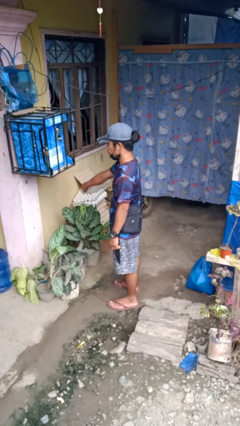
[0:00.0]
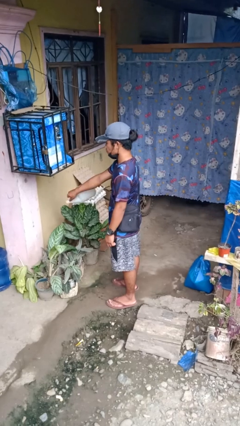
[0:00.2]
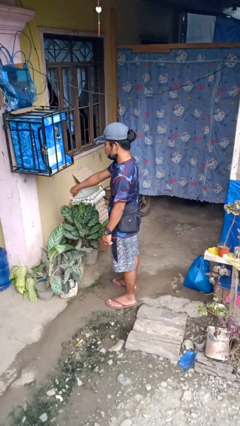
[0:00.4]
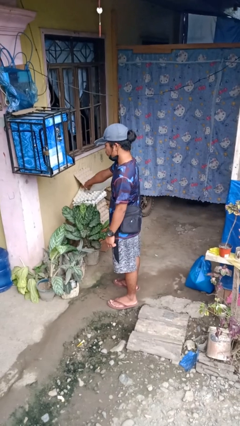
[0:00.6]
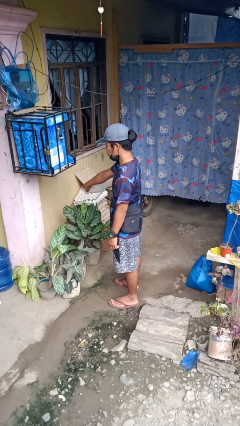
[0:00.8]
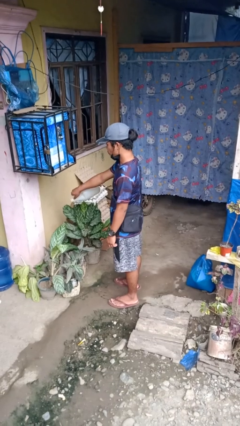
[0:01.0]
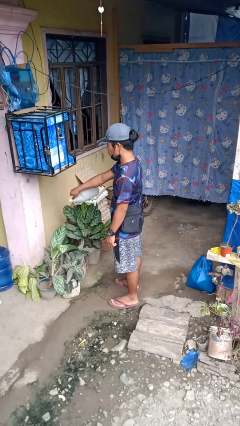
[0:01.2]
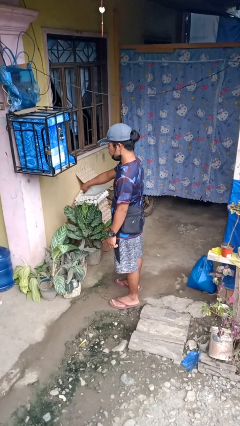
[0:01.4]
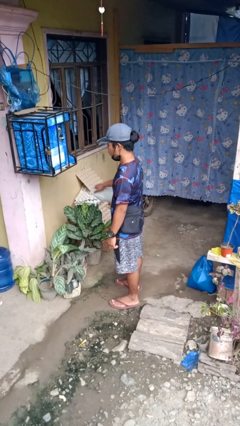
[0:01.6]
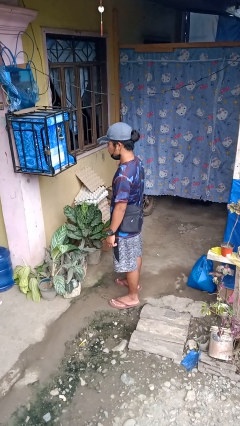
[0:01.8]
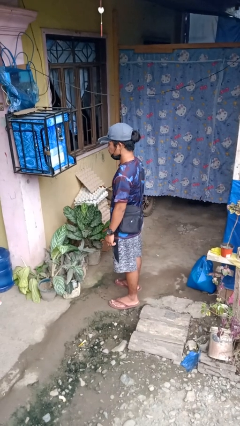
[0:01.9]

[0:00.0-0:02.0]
person waters houseplant

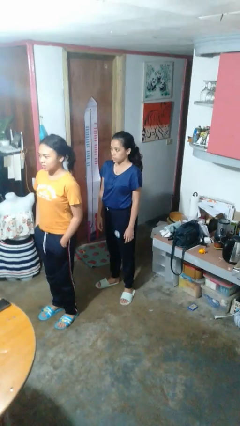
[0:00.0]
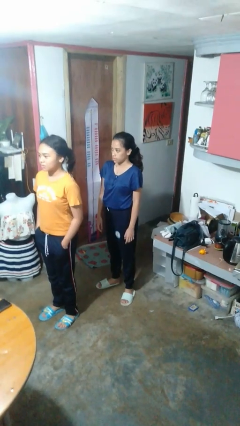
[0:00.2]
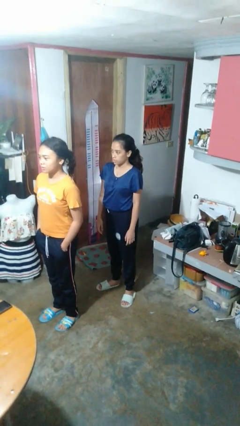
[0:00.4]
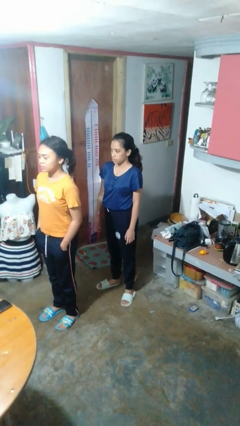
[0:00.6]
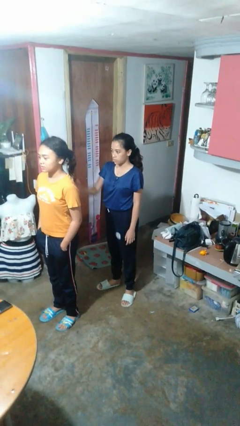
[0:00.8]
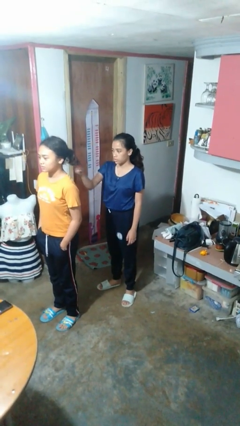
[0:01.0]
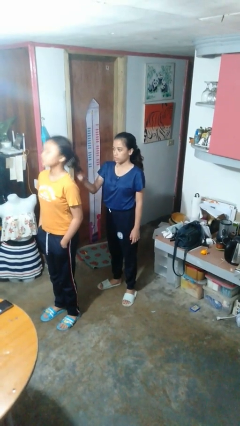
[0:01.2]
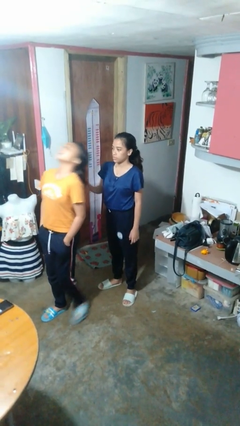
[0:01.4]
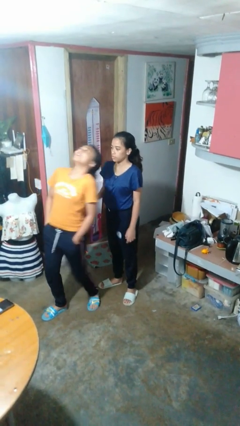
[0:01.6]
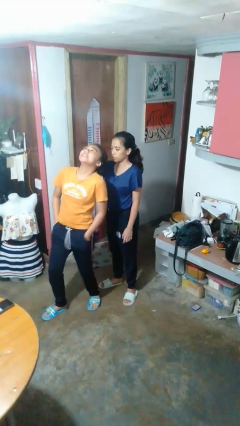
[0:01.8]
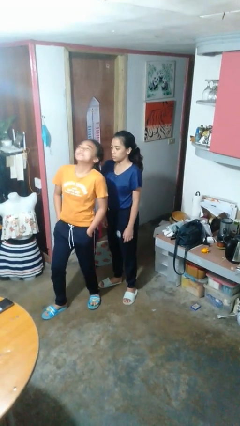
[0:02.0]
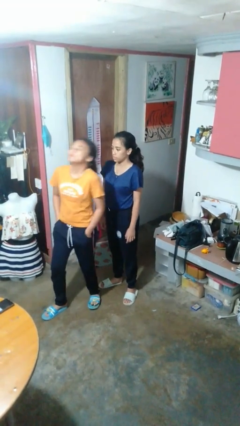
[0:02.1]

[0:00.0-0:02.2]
person grabs person by hair

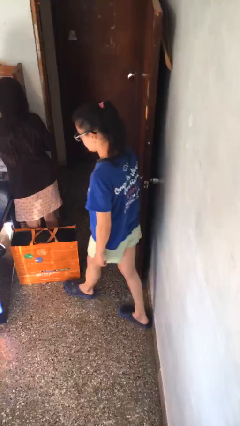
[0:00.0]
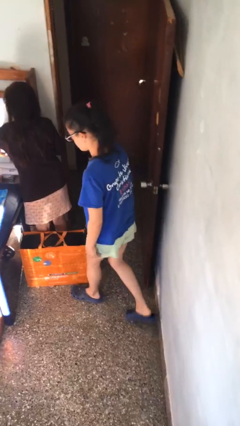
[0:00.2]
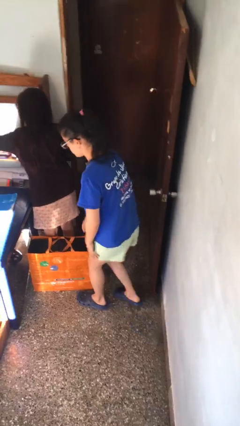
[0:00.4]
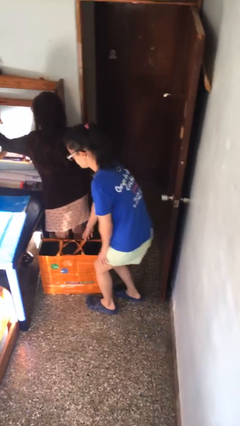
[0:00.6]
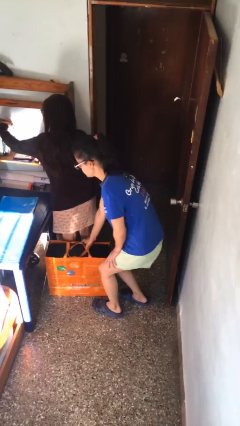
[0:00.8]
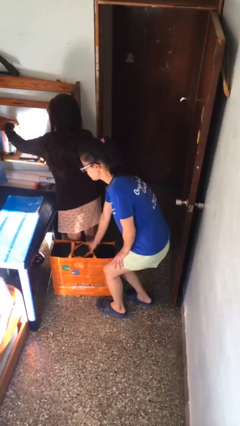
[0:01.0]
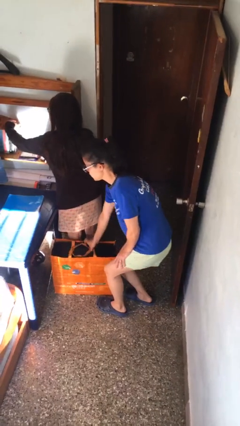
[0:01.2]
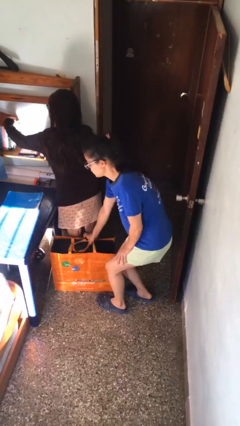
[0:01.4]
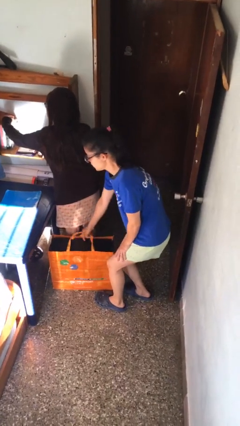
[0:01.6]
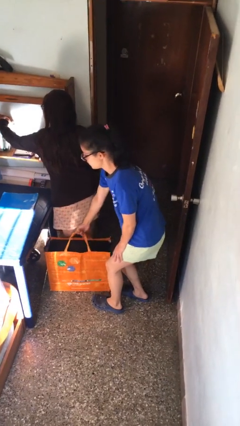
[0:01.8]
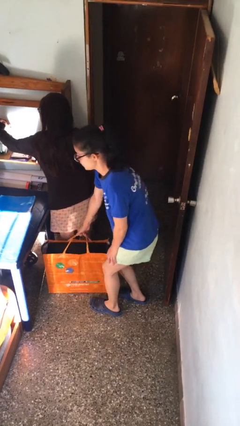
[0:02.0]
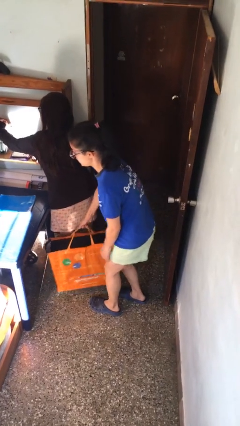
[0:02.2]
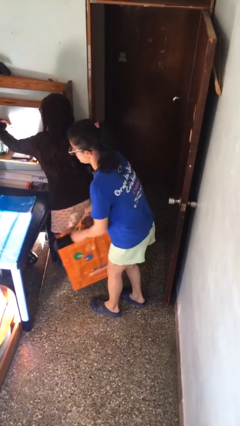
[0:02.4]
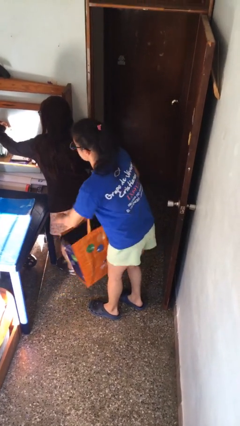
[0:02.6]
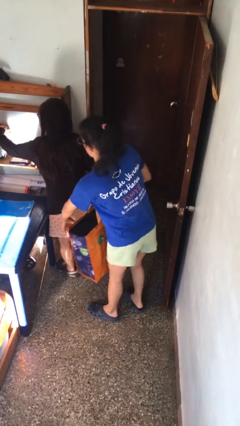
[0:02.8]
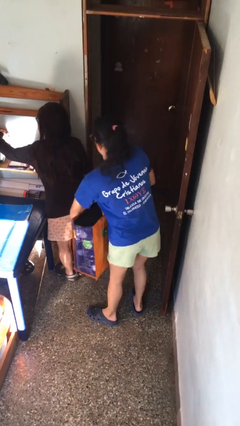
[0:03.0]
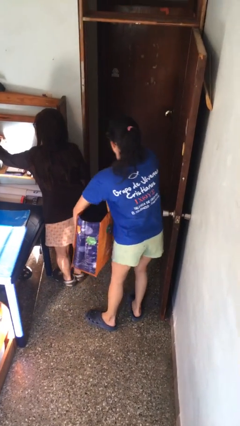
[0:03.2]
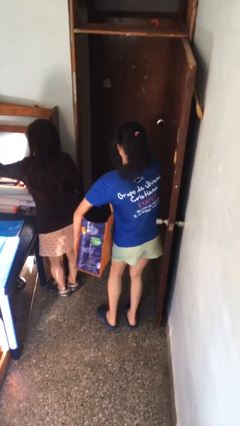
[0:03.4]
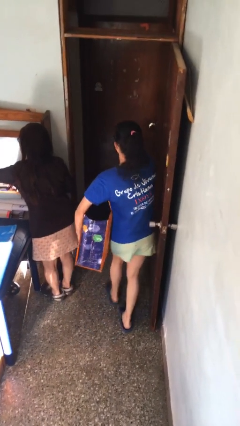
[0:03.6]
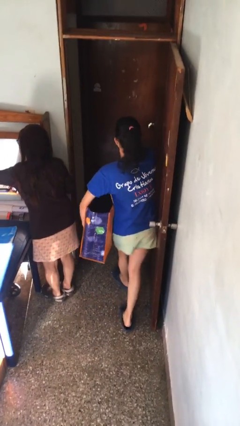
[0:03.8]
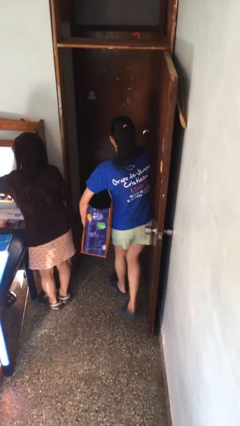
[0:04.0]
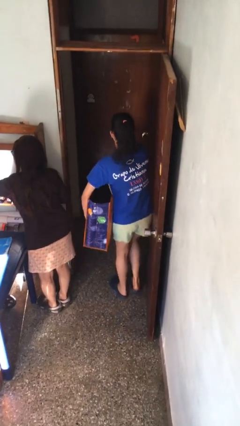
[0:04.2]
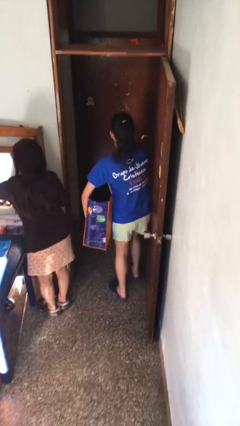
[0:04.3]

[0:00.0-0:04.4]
person steals object from person

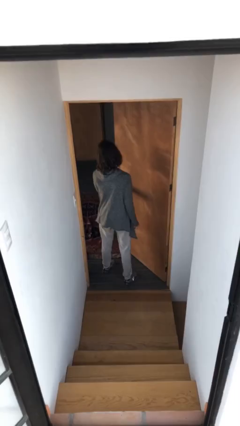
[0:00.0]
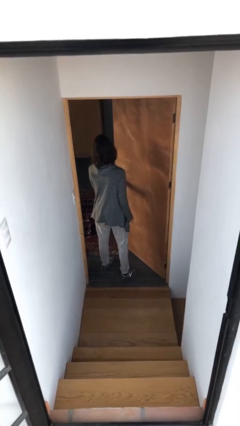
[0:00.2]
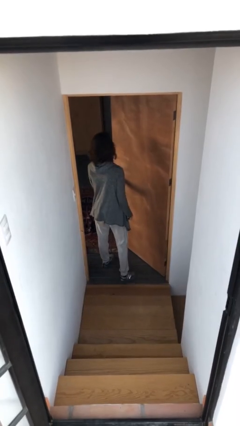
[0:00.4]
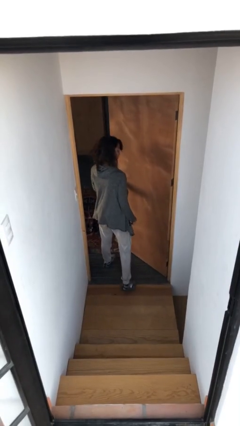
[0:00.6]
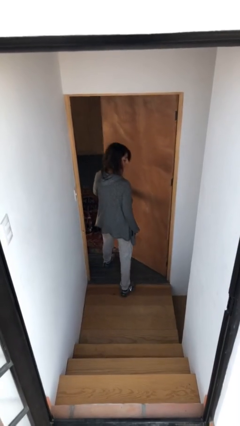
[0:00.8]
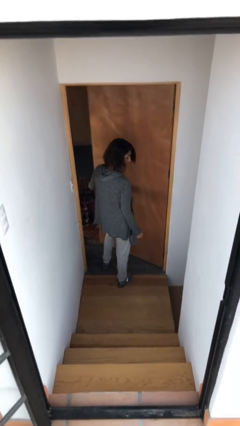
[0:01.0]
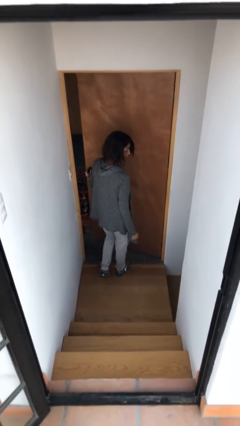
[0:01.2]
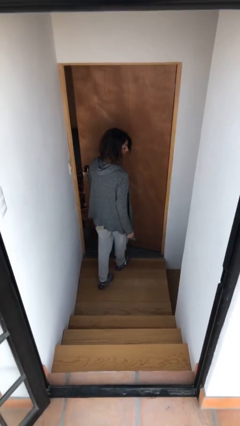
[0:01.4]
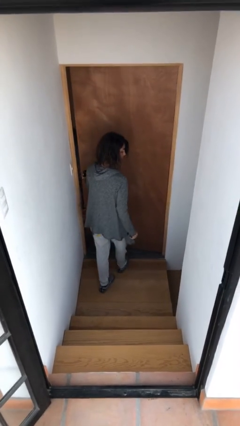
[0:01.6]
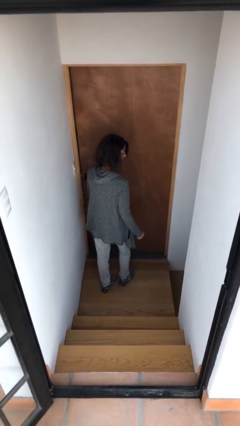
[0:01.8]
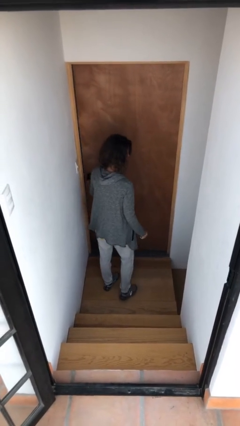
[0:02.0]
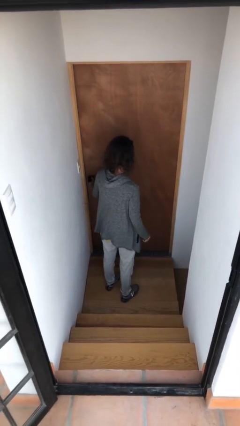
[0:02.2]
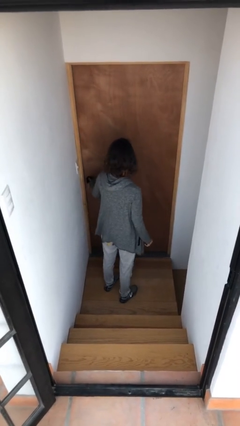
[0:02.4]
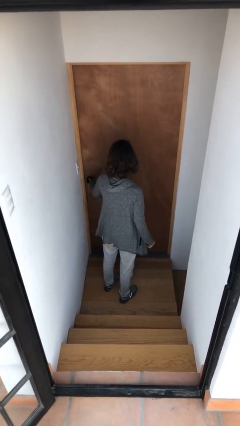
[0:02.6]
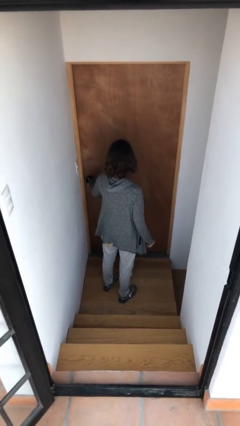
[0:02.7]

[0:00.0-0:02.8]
person closes facility door

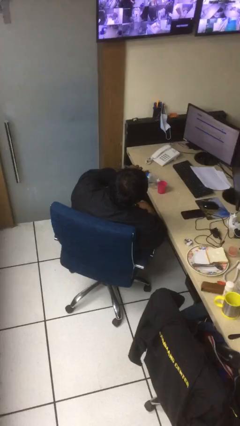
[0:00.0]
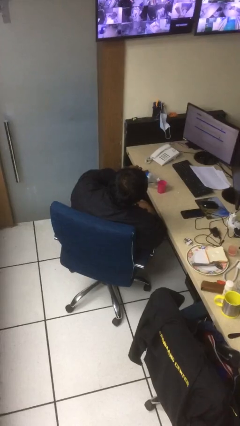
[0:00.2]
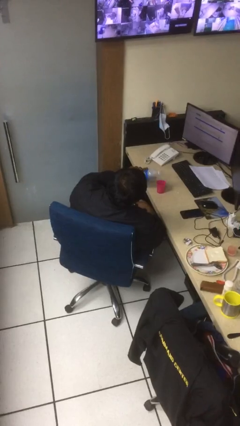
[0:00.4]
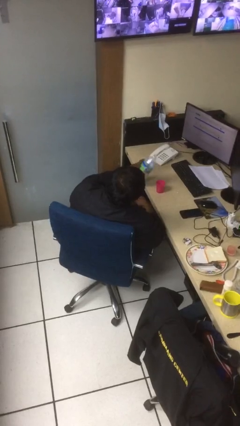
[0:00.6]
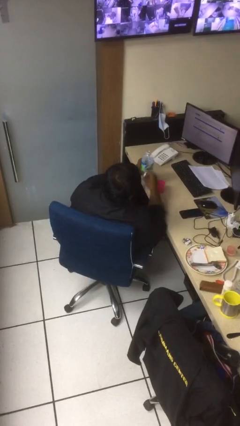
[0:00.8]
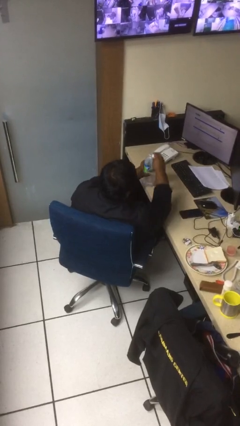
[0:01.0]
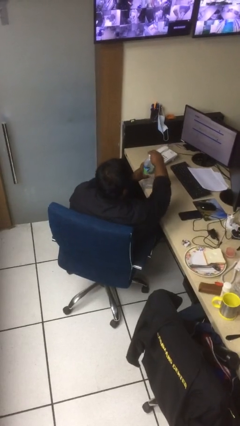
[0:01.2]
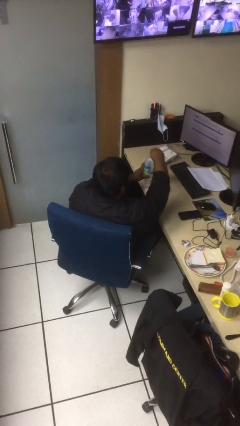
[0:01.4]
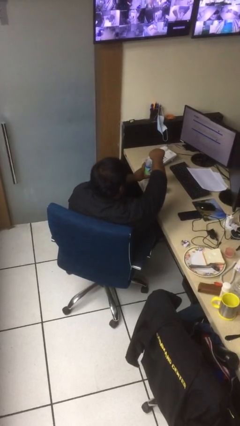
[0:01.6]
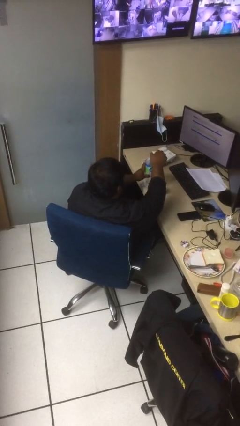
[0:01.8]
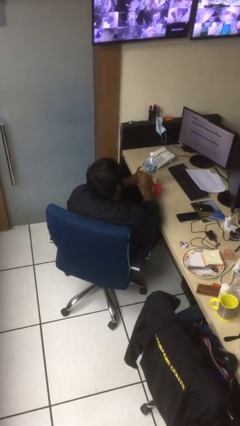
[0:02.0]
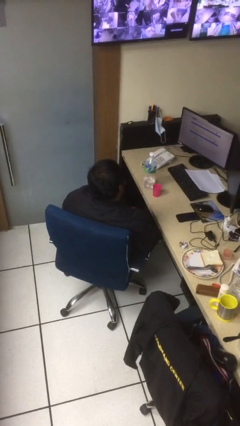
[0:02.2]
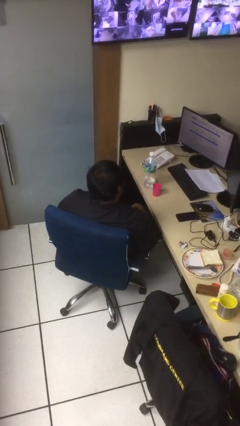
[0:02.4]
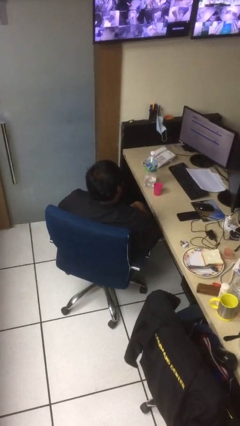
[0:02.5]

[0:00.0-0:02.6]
person screws lid to bottle

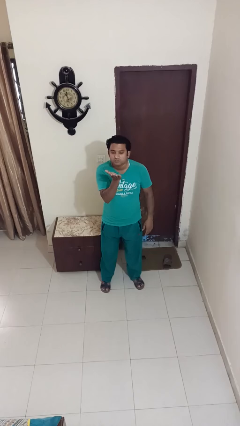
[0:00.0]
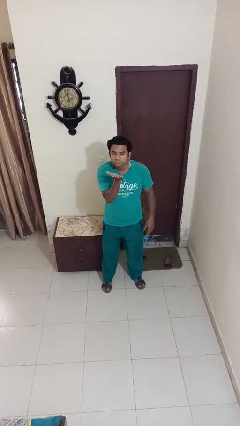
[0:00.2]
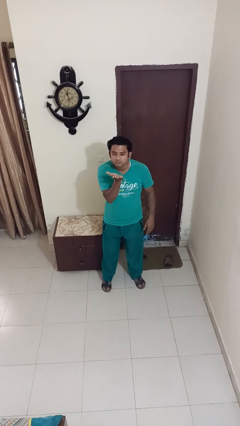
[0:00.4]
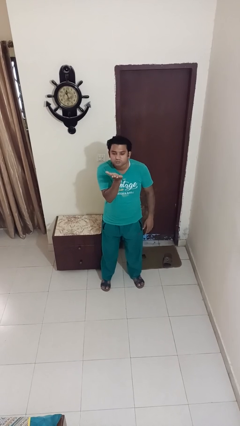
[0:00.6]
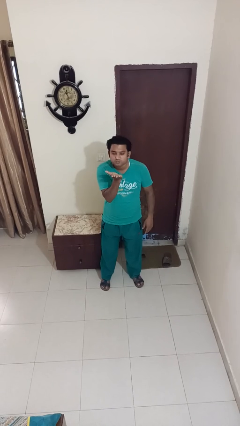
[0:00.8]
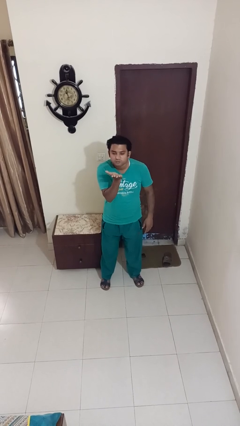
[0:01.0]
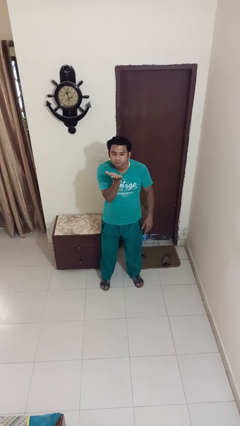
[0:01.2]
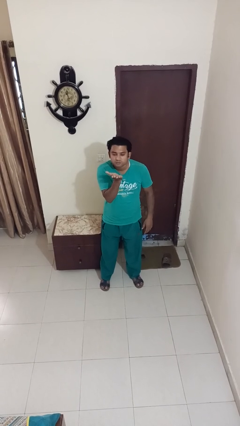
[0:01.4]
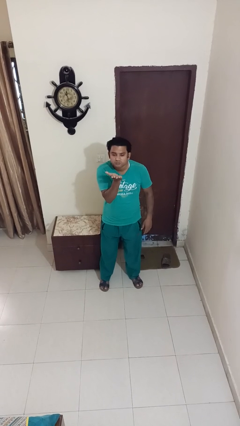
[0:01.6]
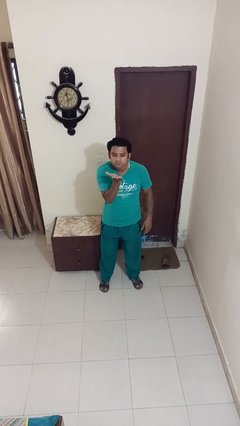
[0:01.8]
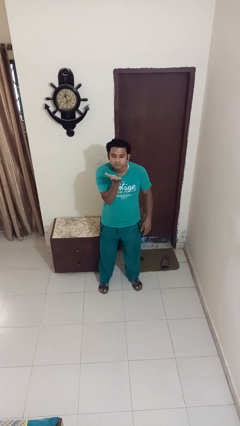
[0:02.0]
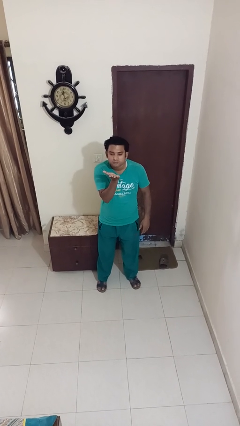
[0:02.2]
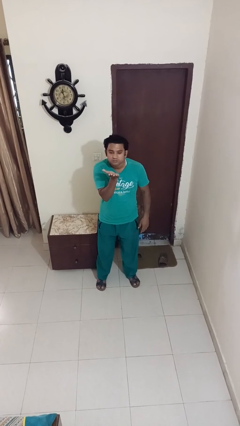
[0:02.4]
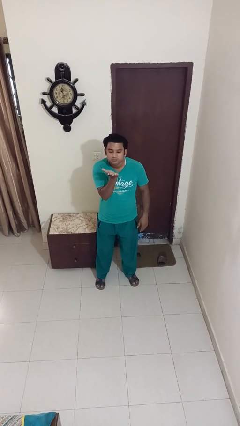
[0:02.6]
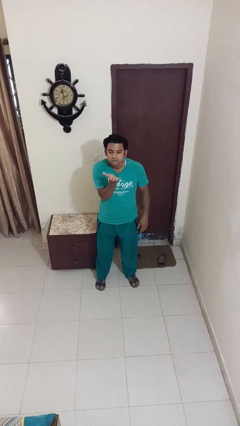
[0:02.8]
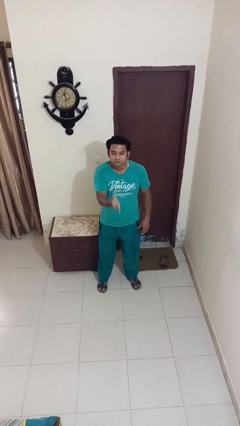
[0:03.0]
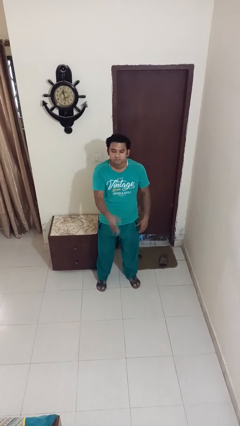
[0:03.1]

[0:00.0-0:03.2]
person gestures blow kiss
